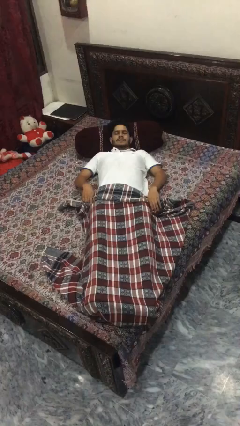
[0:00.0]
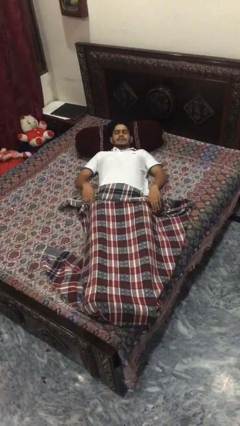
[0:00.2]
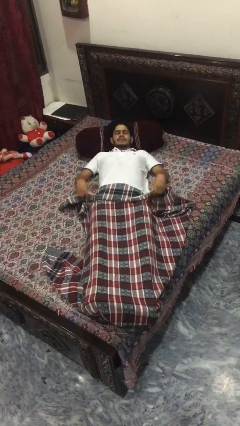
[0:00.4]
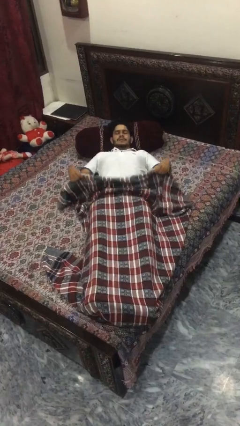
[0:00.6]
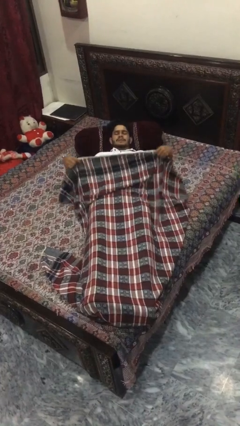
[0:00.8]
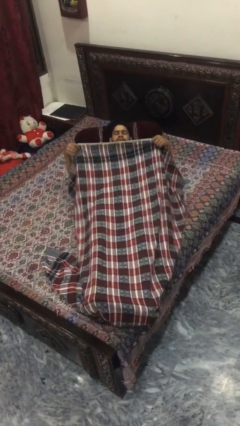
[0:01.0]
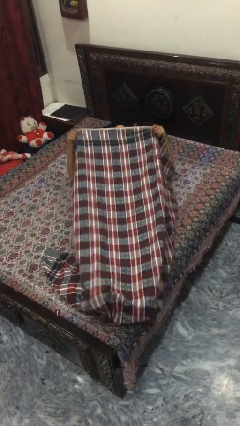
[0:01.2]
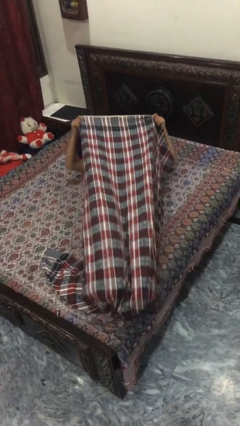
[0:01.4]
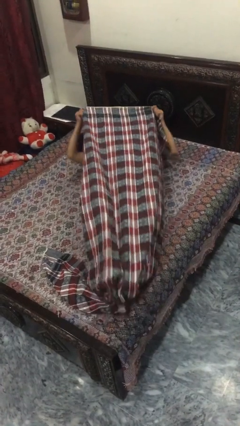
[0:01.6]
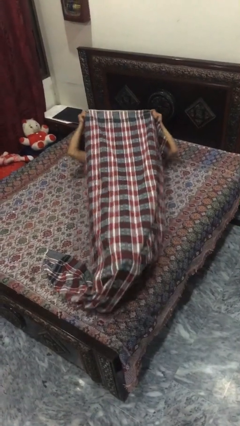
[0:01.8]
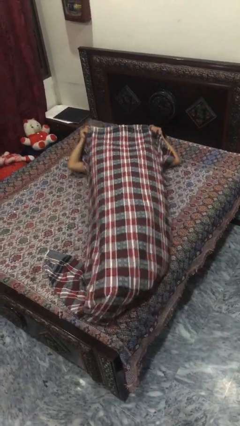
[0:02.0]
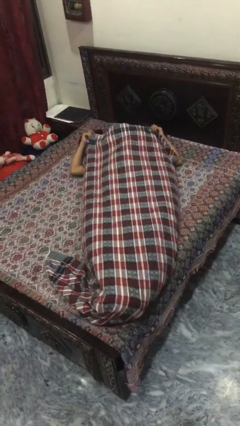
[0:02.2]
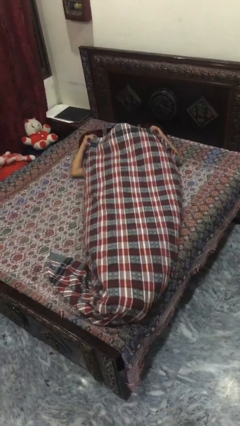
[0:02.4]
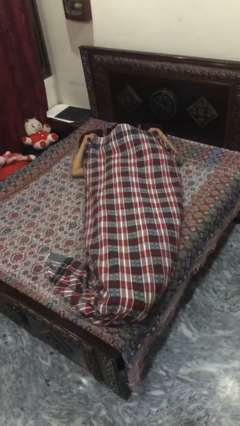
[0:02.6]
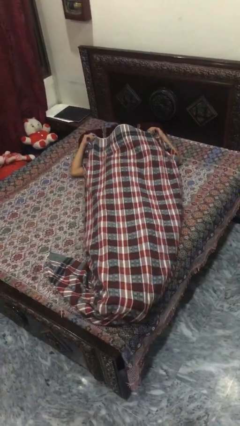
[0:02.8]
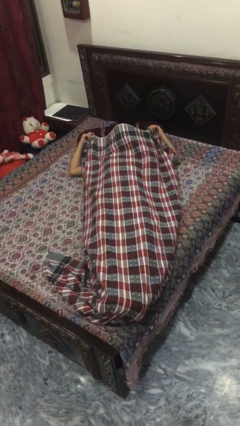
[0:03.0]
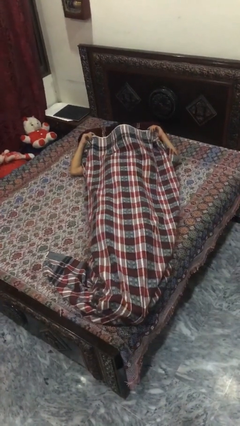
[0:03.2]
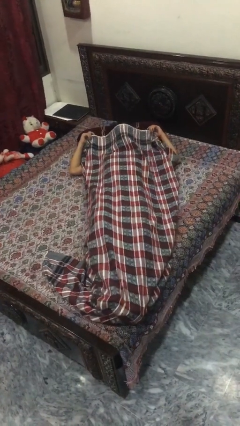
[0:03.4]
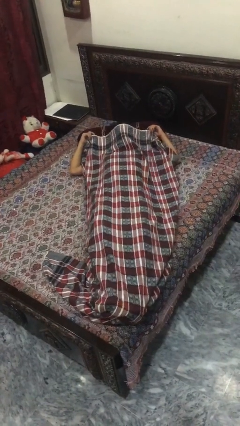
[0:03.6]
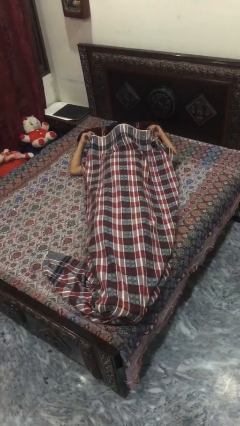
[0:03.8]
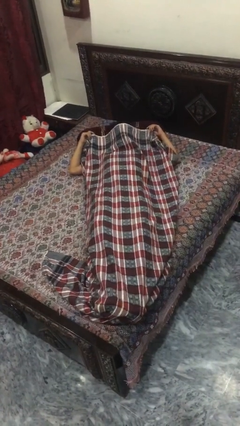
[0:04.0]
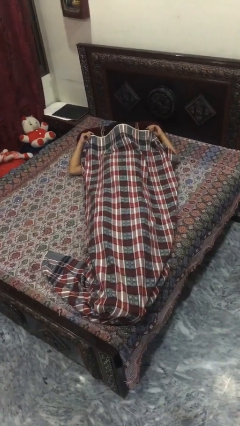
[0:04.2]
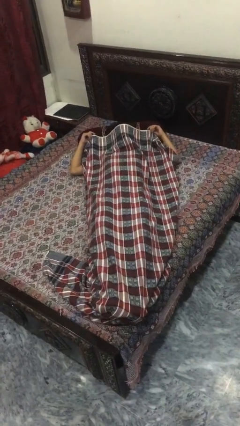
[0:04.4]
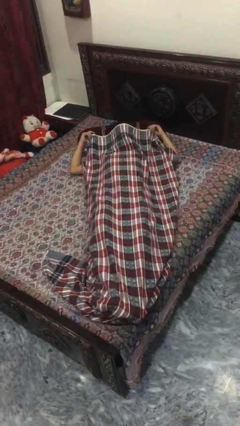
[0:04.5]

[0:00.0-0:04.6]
person covers with bedsheets

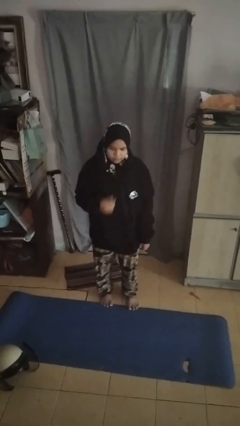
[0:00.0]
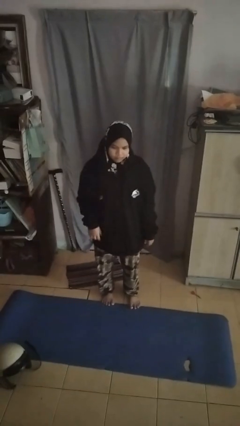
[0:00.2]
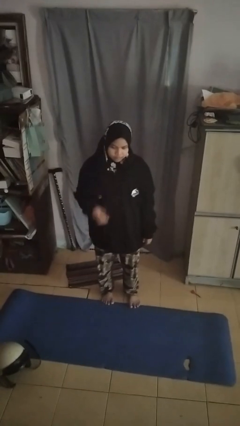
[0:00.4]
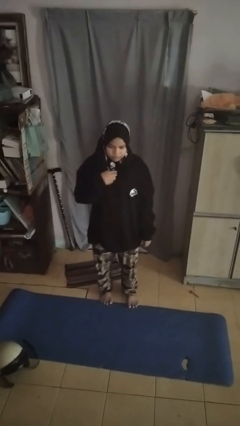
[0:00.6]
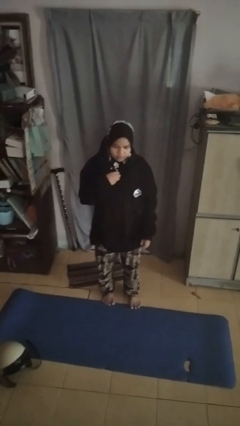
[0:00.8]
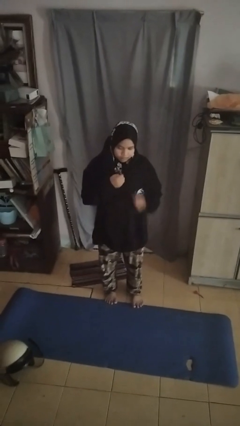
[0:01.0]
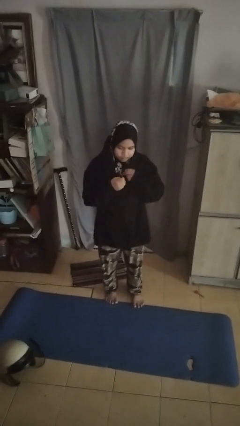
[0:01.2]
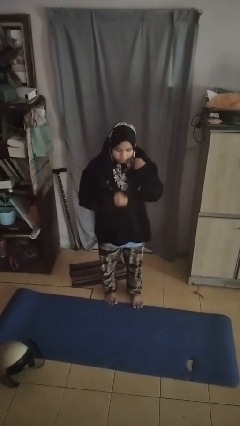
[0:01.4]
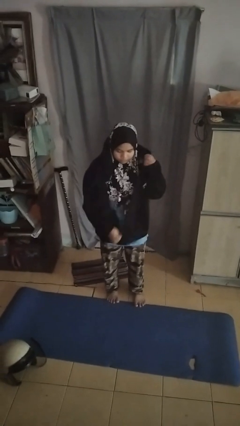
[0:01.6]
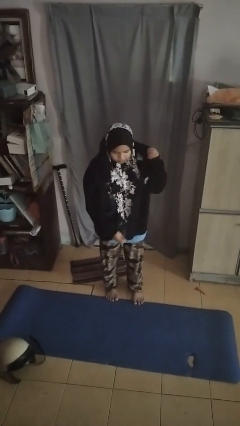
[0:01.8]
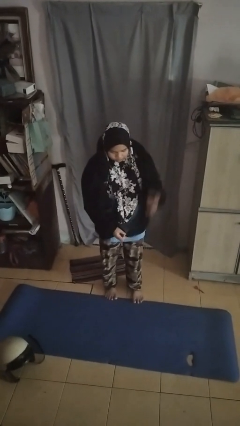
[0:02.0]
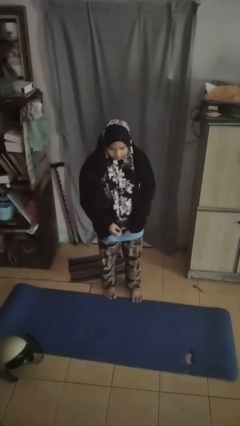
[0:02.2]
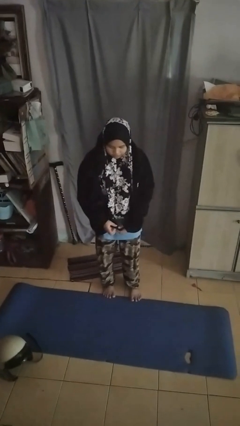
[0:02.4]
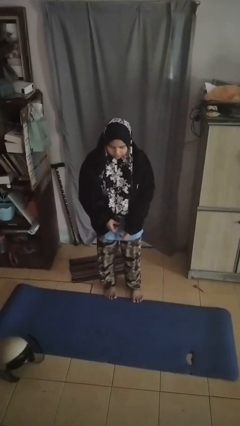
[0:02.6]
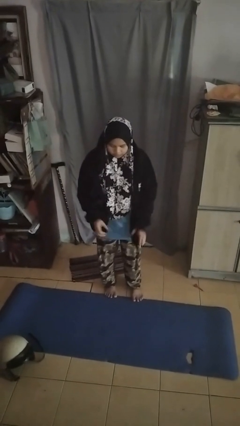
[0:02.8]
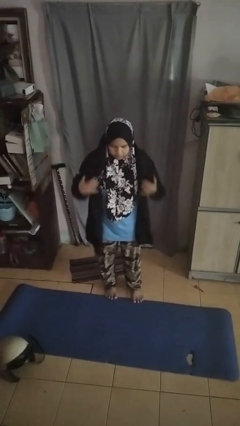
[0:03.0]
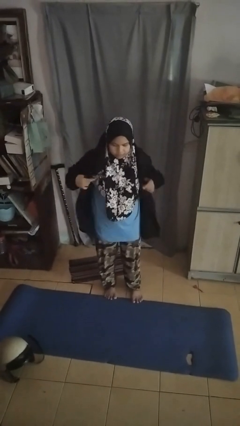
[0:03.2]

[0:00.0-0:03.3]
person unzips jacket

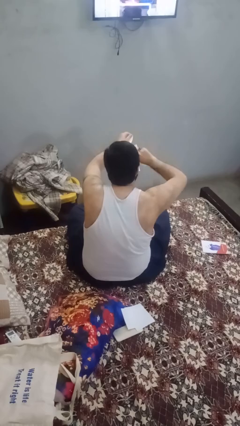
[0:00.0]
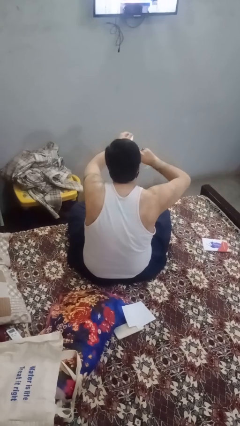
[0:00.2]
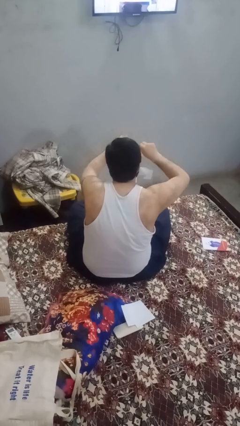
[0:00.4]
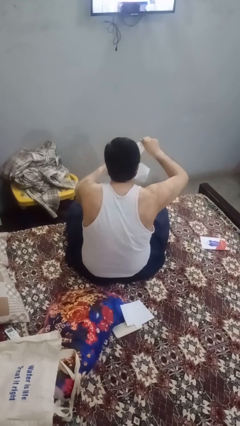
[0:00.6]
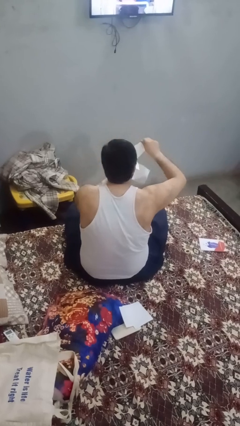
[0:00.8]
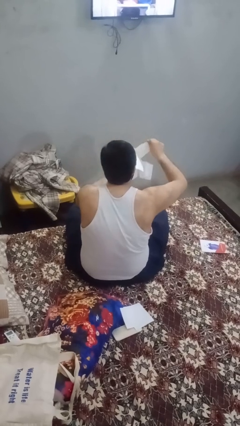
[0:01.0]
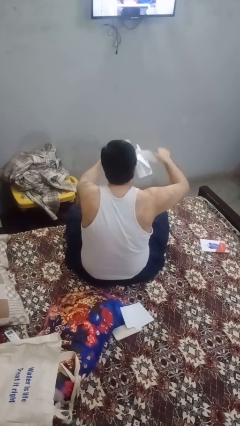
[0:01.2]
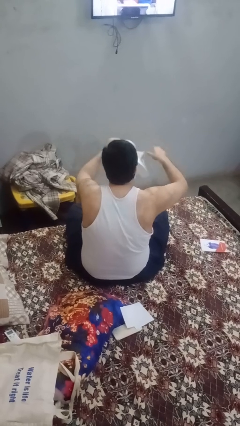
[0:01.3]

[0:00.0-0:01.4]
person tears paper

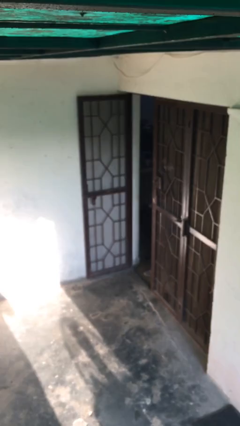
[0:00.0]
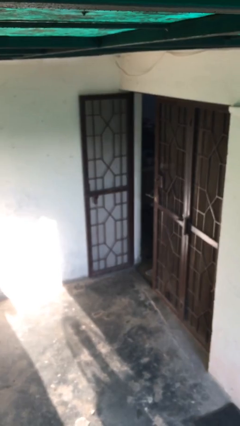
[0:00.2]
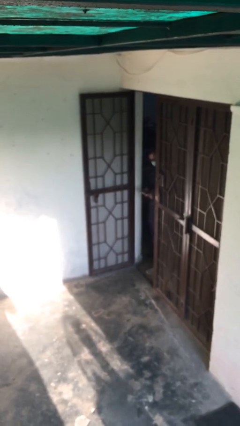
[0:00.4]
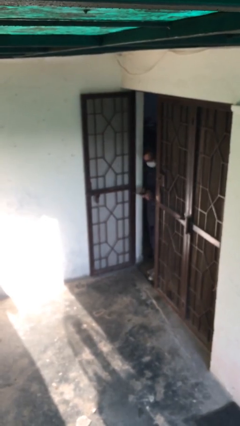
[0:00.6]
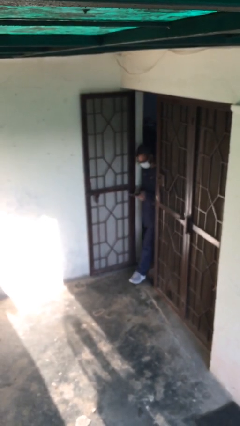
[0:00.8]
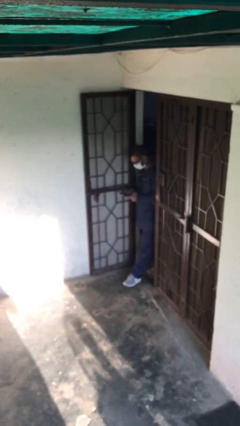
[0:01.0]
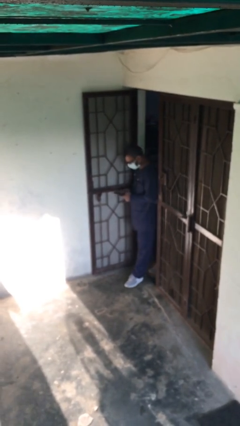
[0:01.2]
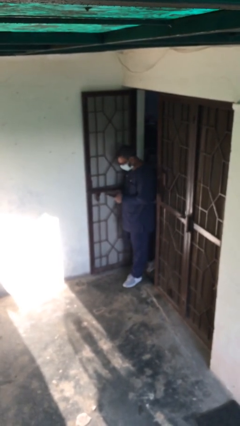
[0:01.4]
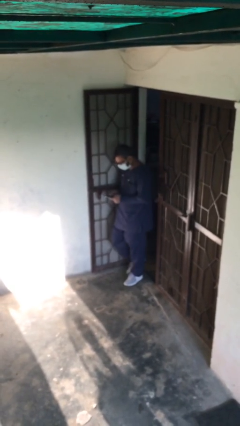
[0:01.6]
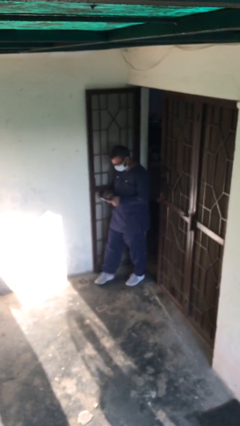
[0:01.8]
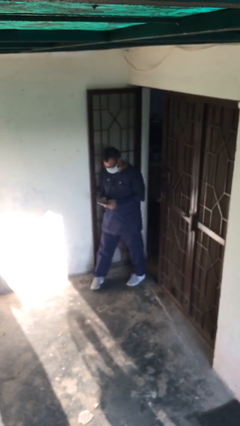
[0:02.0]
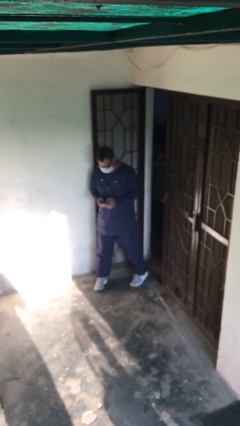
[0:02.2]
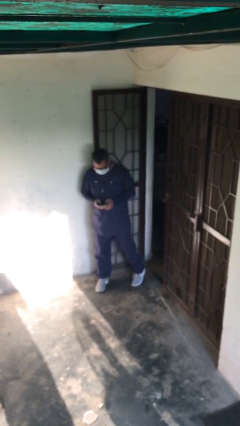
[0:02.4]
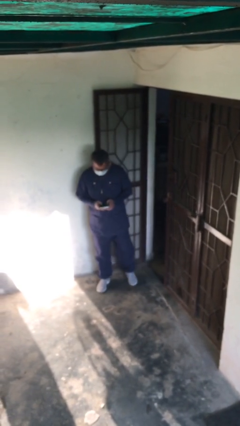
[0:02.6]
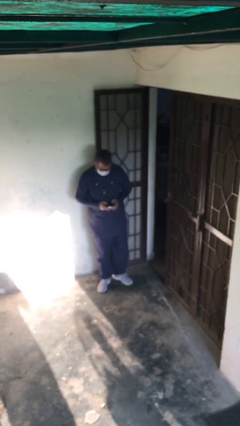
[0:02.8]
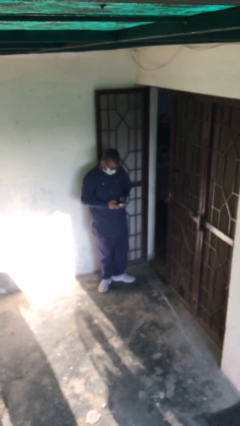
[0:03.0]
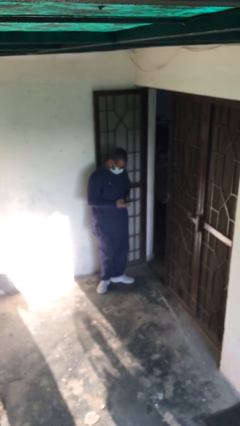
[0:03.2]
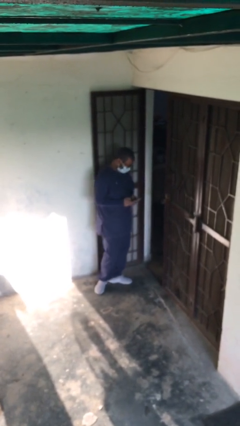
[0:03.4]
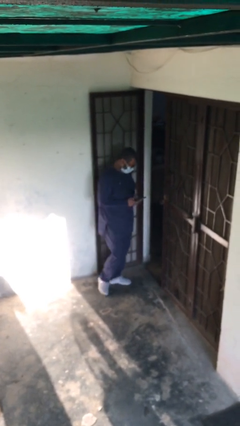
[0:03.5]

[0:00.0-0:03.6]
person enters scene through structure

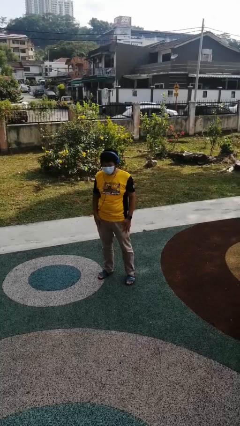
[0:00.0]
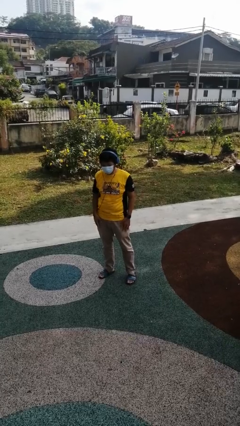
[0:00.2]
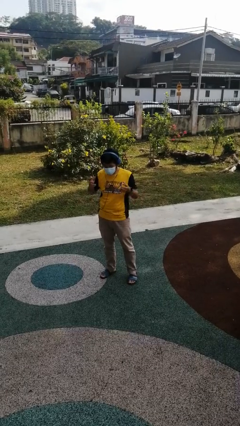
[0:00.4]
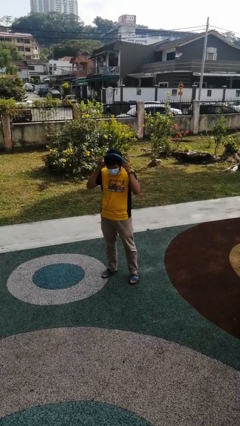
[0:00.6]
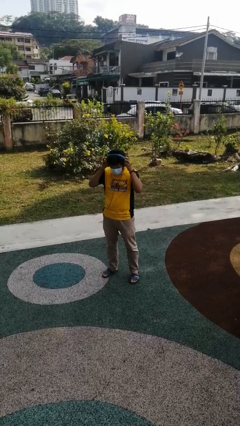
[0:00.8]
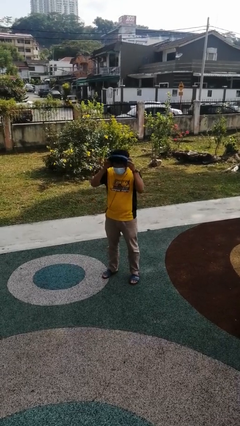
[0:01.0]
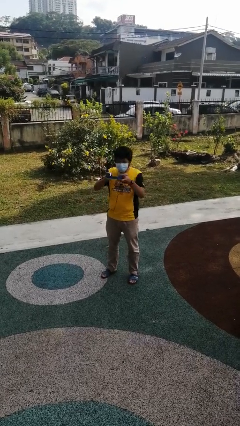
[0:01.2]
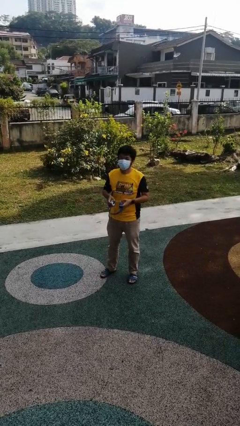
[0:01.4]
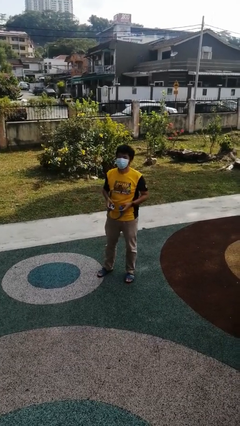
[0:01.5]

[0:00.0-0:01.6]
person takes off headphones

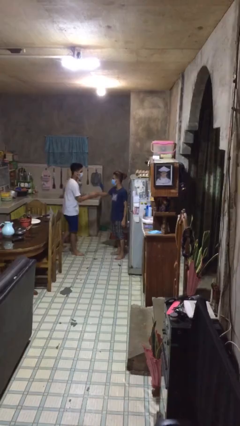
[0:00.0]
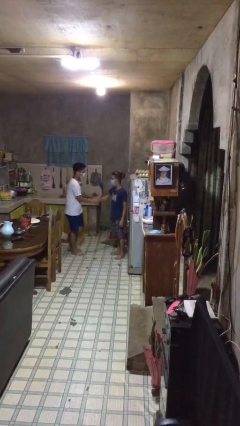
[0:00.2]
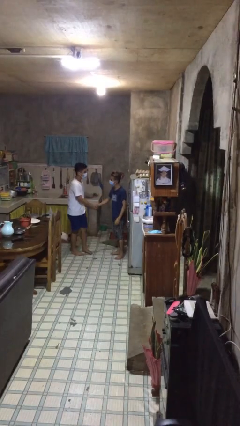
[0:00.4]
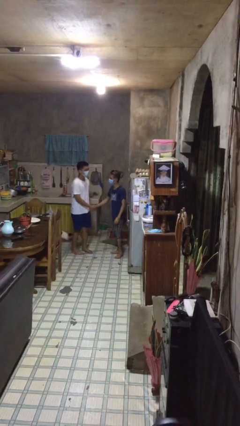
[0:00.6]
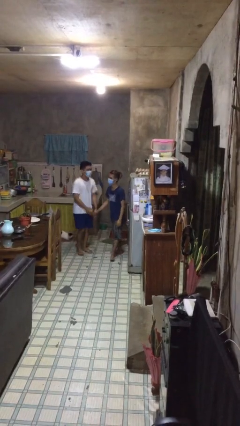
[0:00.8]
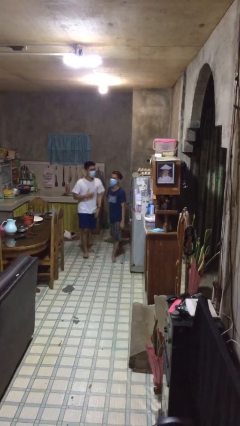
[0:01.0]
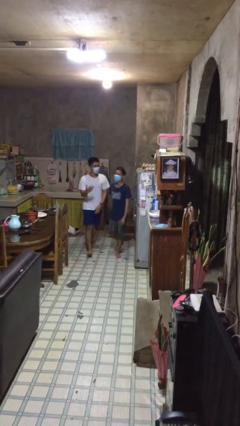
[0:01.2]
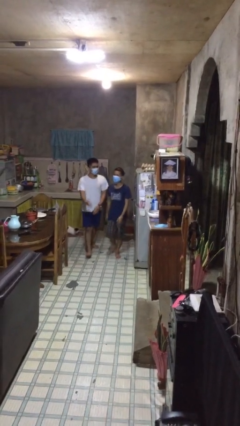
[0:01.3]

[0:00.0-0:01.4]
person shakes hand

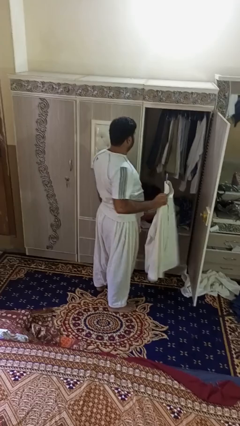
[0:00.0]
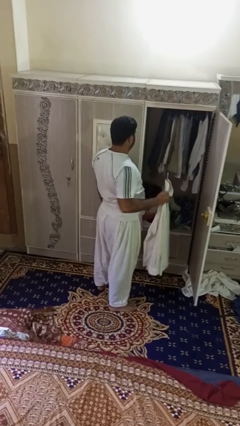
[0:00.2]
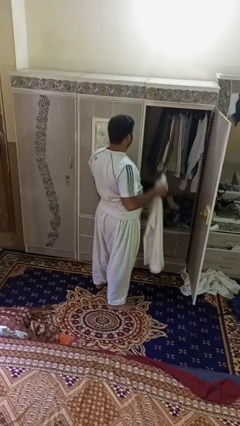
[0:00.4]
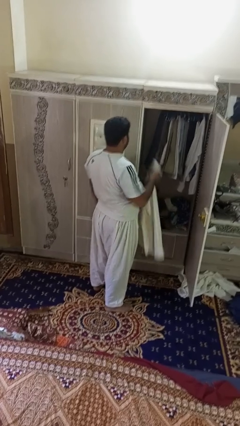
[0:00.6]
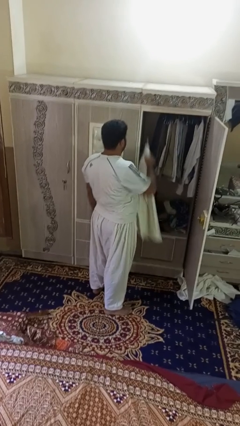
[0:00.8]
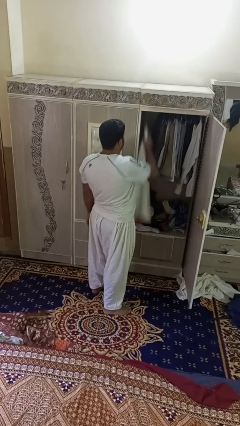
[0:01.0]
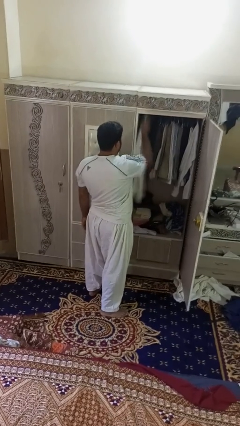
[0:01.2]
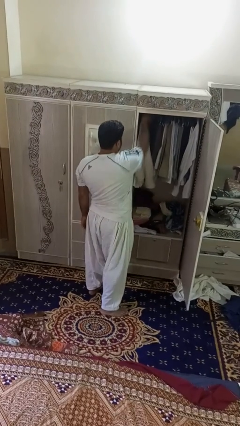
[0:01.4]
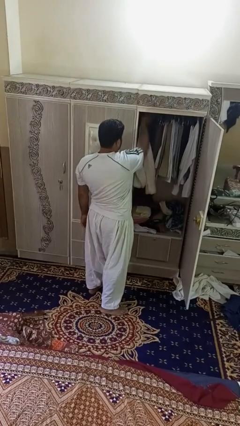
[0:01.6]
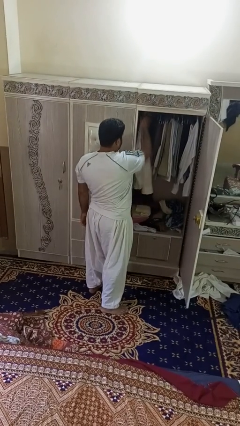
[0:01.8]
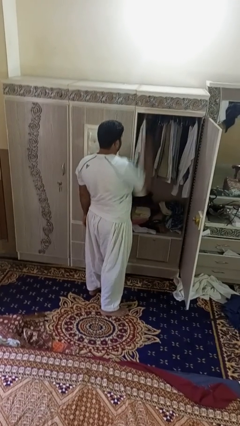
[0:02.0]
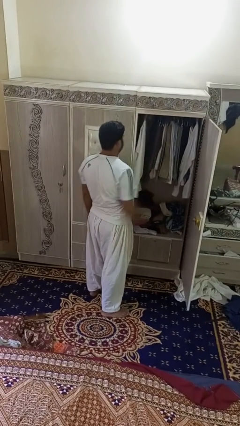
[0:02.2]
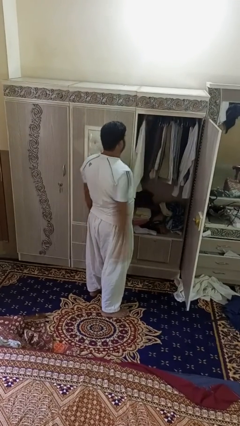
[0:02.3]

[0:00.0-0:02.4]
person puts clothes into closet
